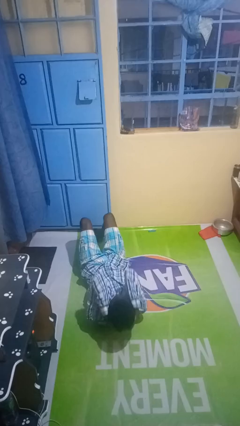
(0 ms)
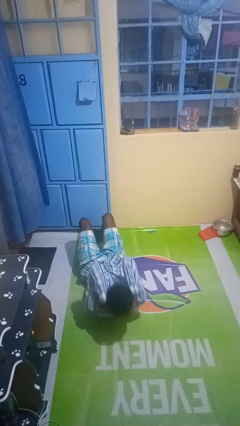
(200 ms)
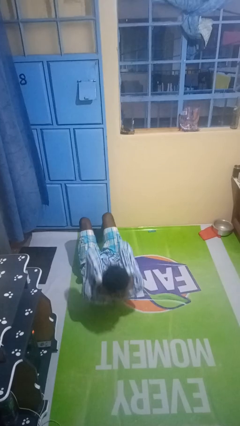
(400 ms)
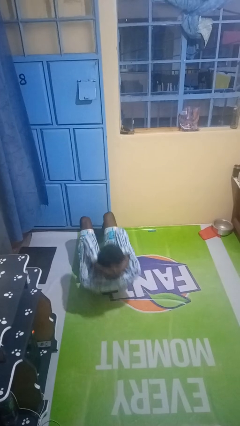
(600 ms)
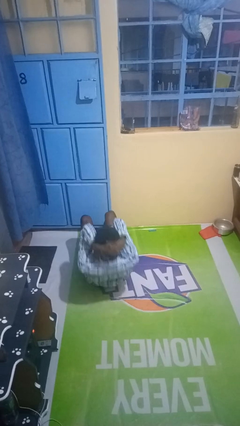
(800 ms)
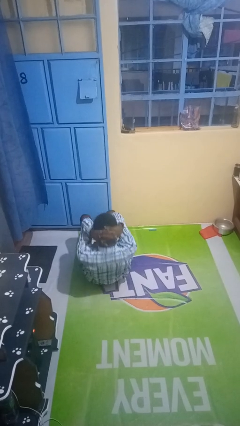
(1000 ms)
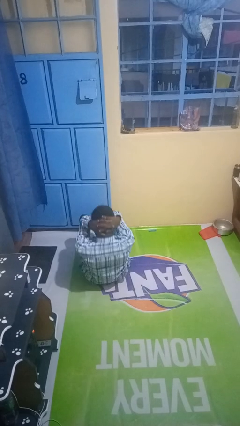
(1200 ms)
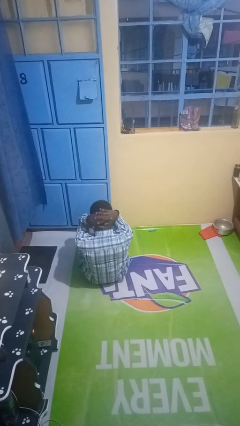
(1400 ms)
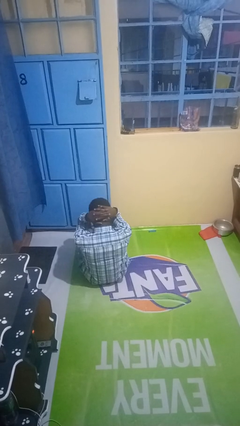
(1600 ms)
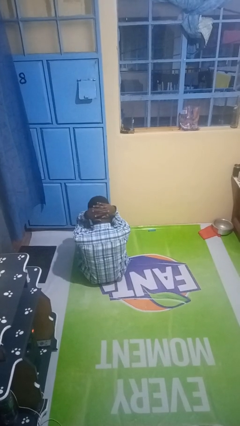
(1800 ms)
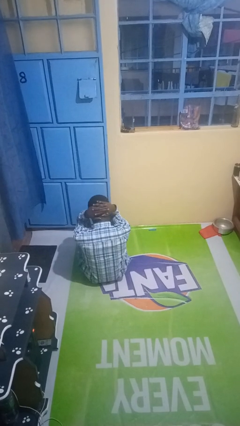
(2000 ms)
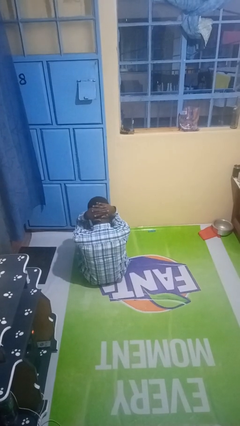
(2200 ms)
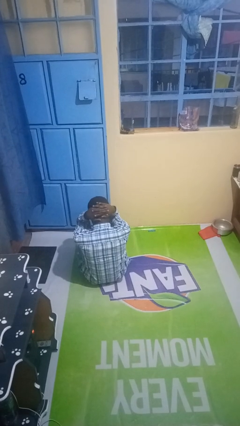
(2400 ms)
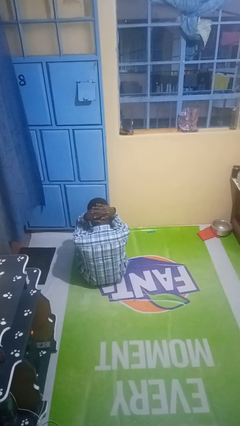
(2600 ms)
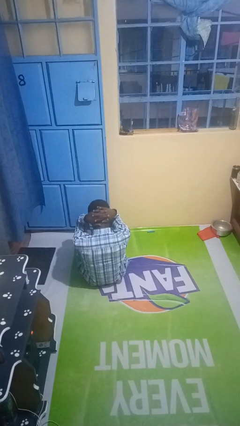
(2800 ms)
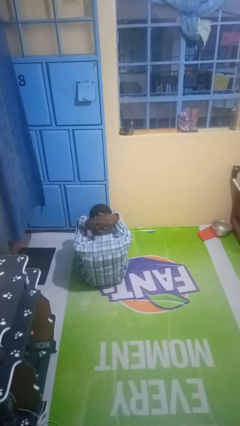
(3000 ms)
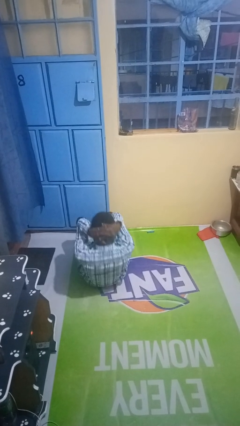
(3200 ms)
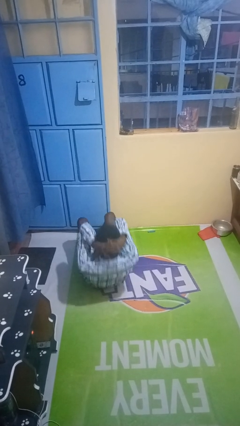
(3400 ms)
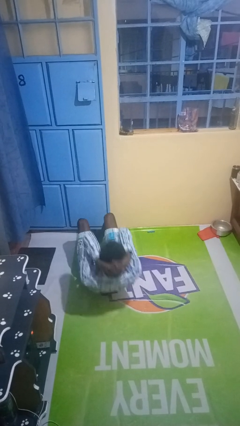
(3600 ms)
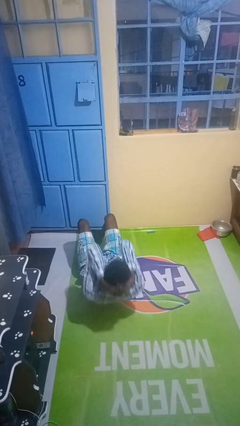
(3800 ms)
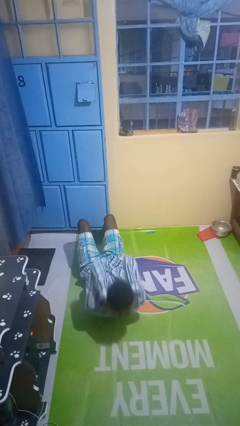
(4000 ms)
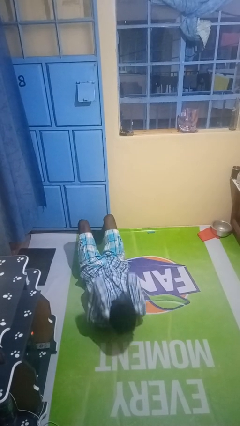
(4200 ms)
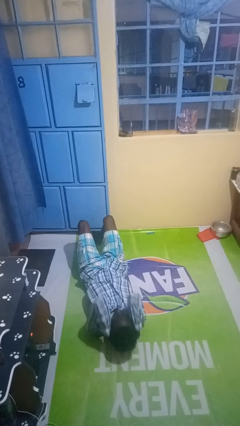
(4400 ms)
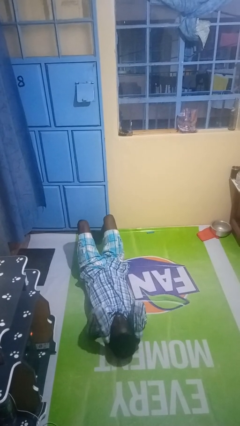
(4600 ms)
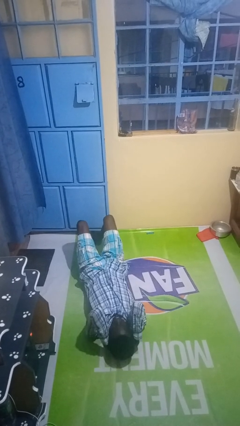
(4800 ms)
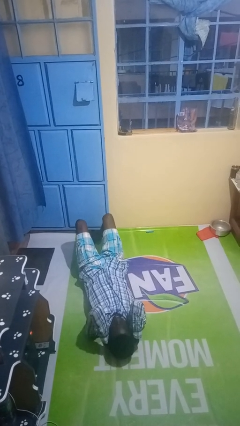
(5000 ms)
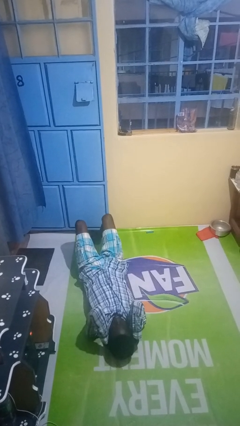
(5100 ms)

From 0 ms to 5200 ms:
person exercises with situp

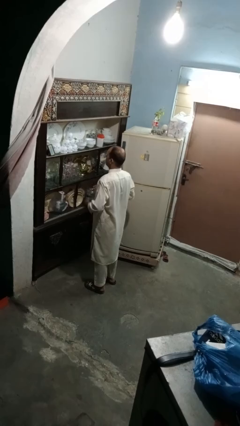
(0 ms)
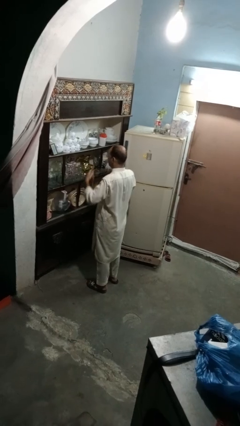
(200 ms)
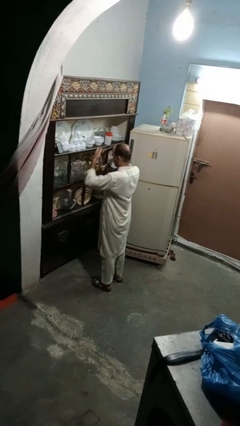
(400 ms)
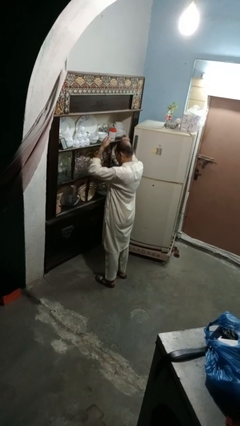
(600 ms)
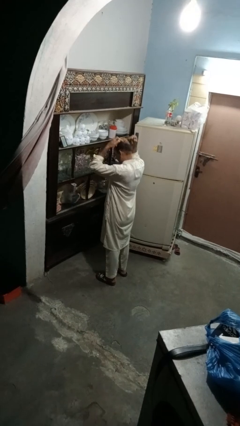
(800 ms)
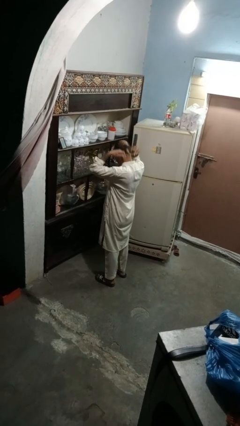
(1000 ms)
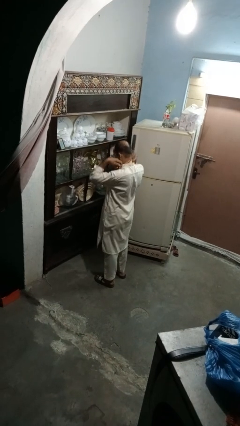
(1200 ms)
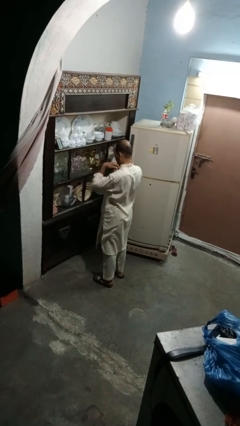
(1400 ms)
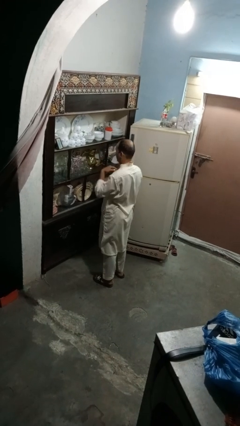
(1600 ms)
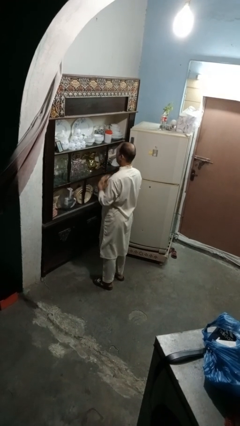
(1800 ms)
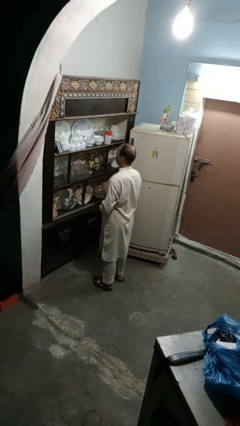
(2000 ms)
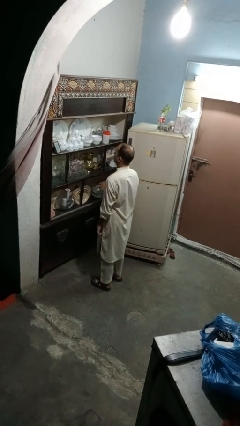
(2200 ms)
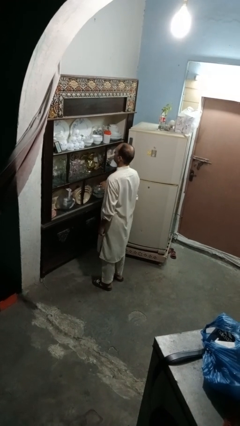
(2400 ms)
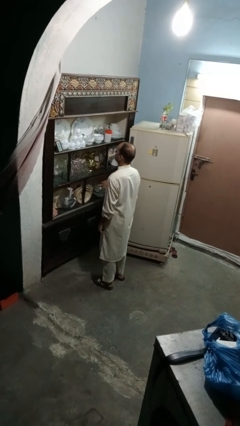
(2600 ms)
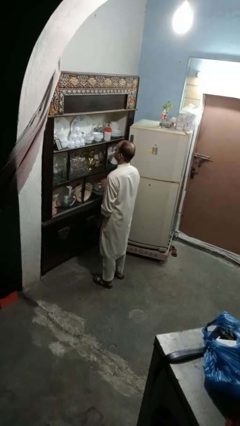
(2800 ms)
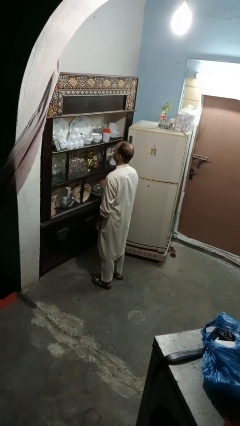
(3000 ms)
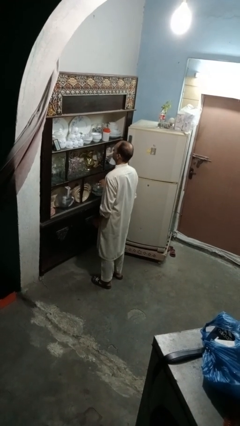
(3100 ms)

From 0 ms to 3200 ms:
person puts on necklace

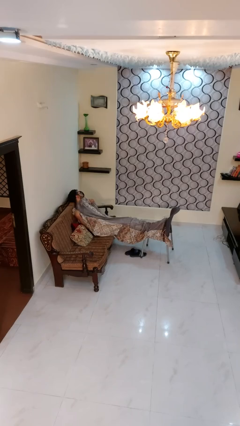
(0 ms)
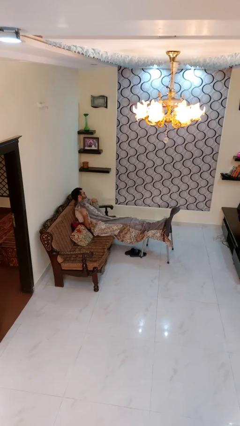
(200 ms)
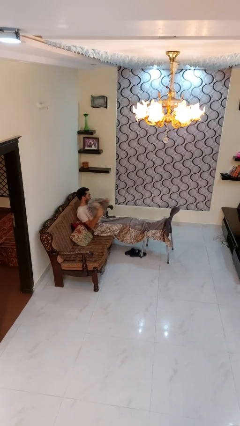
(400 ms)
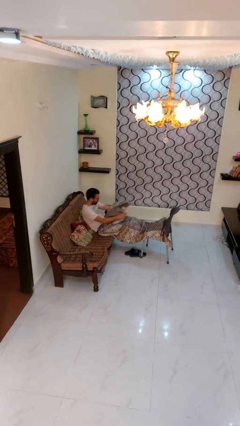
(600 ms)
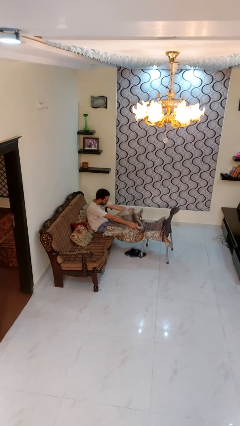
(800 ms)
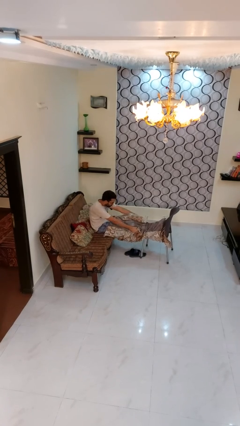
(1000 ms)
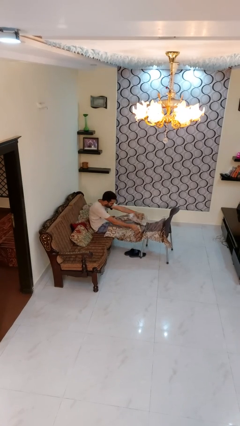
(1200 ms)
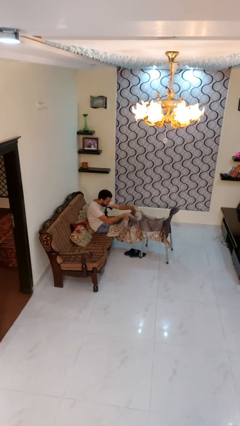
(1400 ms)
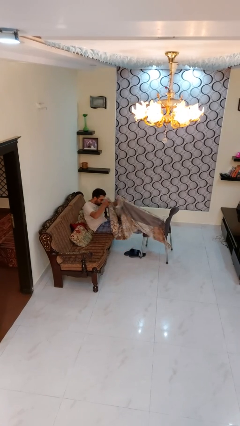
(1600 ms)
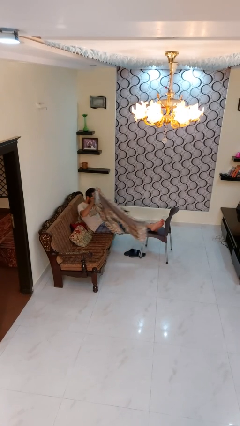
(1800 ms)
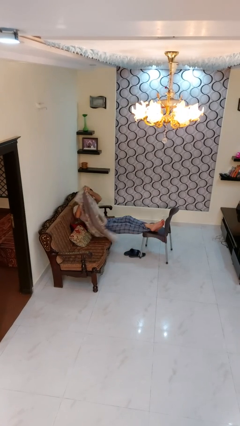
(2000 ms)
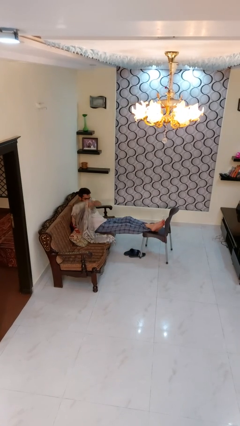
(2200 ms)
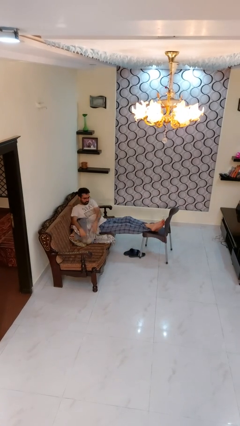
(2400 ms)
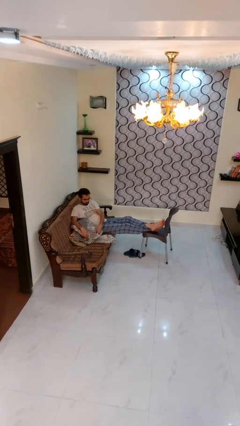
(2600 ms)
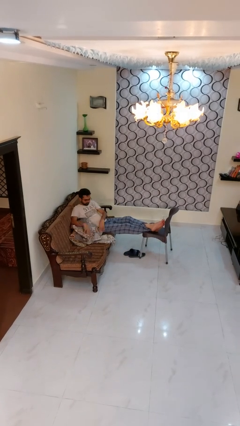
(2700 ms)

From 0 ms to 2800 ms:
person uncovers with blanket

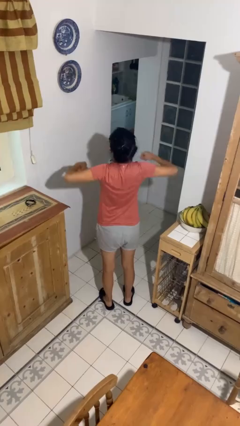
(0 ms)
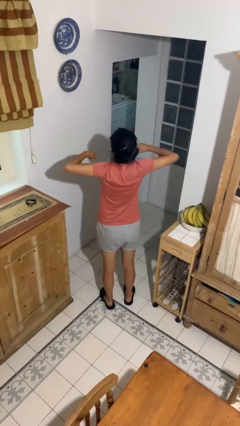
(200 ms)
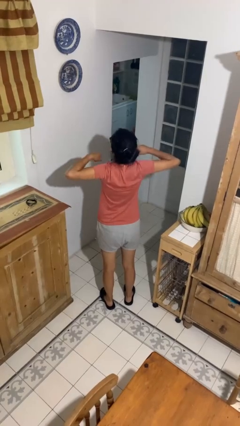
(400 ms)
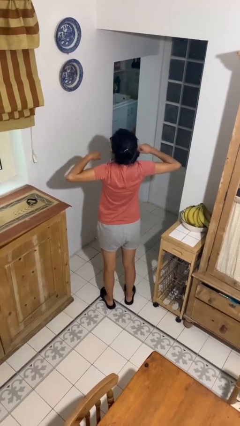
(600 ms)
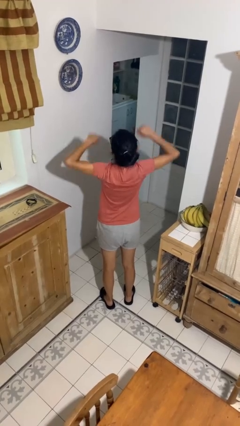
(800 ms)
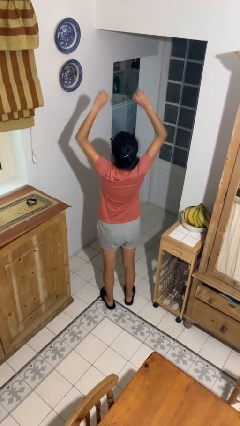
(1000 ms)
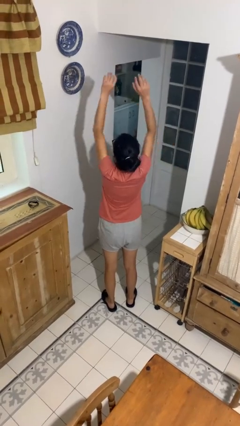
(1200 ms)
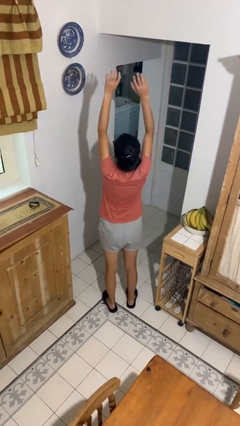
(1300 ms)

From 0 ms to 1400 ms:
person stretches arms to side

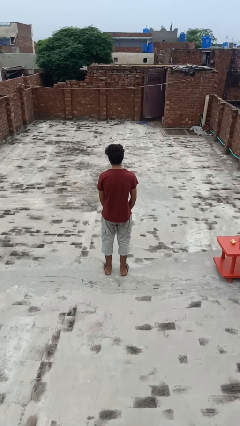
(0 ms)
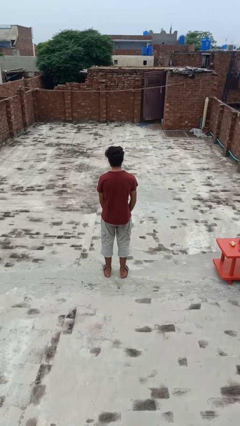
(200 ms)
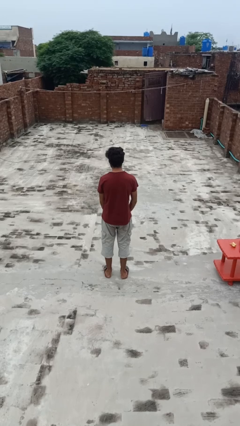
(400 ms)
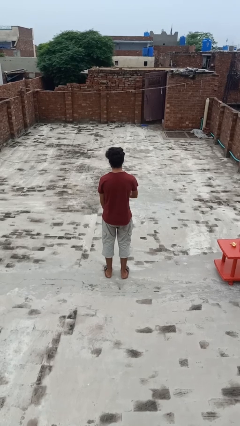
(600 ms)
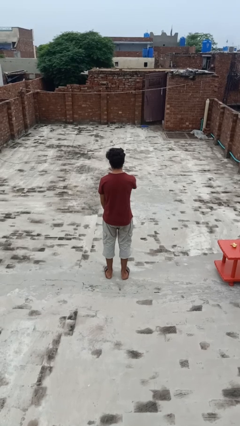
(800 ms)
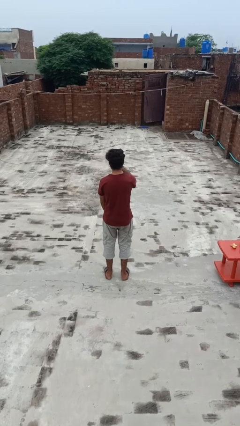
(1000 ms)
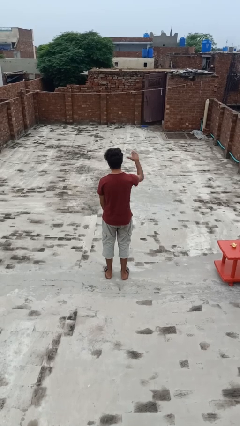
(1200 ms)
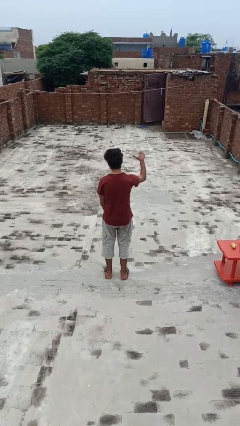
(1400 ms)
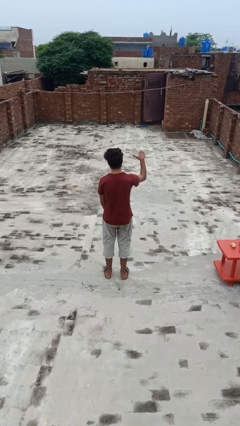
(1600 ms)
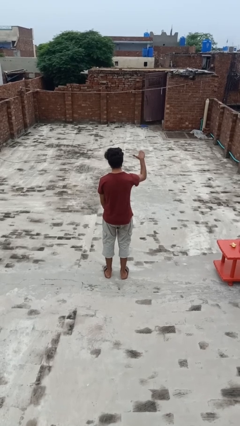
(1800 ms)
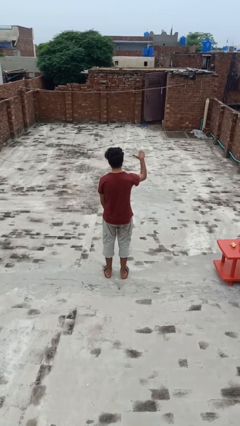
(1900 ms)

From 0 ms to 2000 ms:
person gestures cut

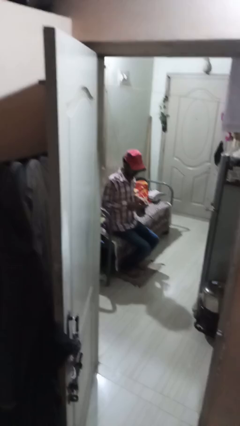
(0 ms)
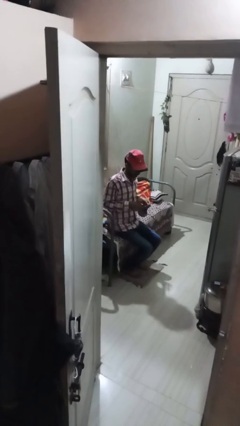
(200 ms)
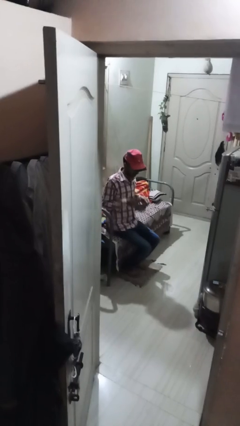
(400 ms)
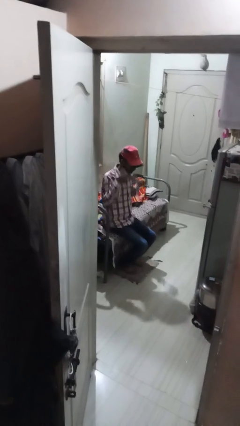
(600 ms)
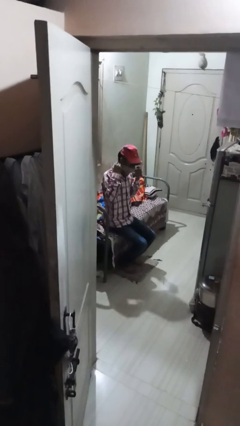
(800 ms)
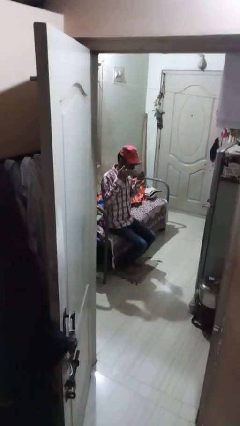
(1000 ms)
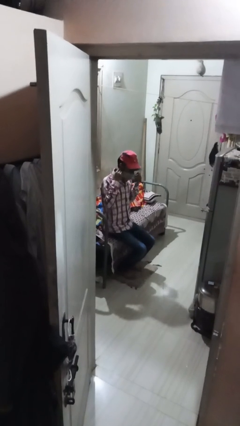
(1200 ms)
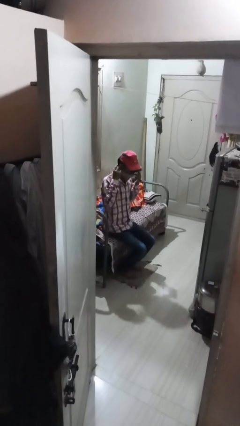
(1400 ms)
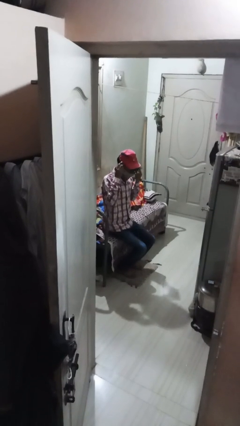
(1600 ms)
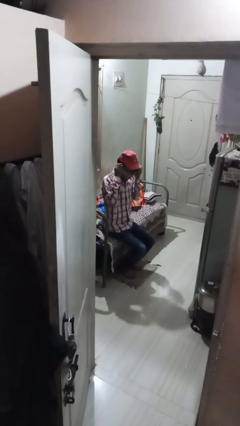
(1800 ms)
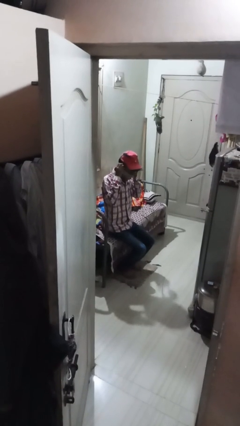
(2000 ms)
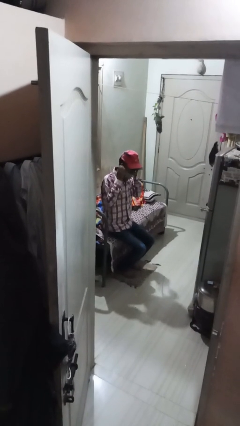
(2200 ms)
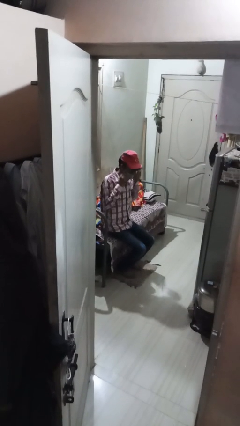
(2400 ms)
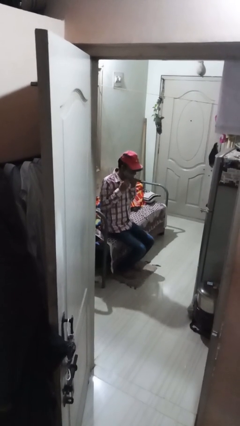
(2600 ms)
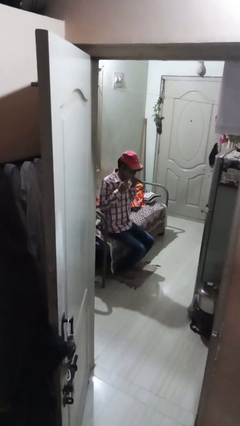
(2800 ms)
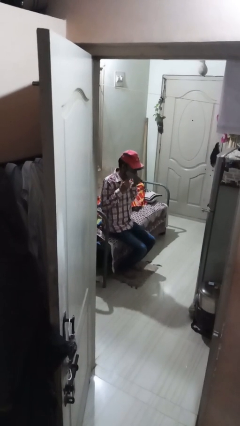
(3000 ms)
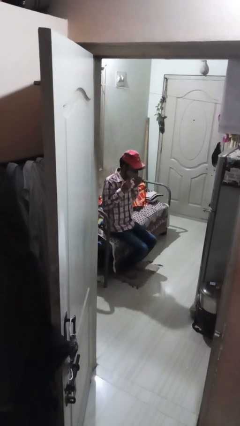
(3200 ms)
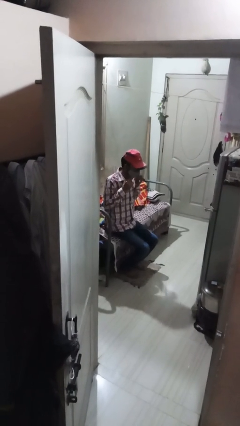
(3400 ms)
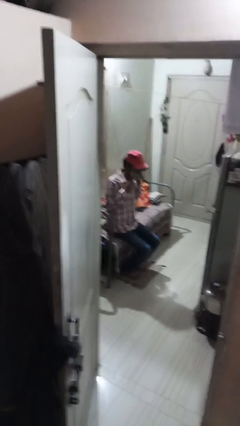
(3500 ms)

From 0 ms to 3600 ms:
person puts on facemask
